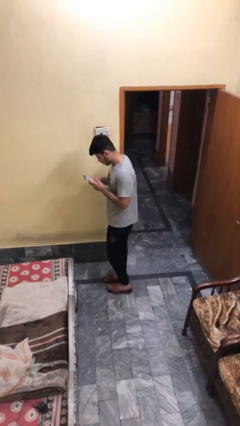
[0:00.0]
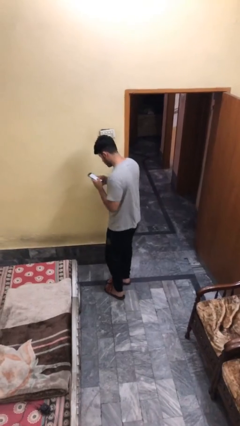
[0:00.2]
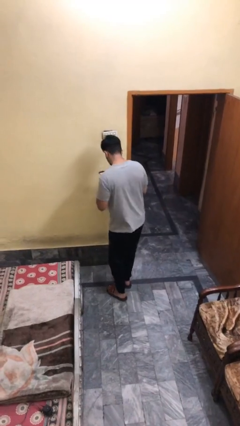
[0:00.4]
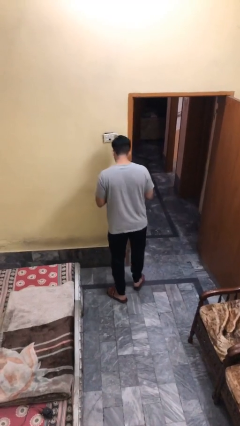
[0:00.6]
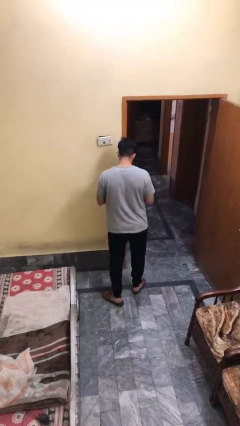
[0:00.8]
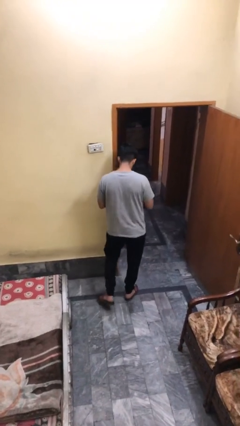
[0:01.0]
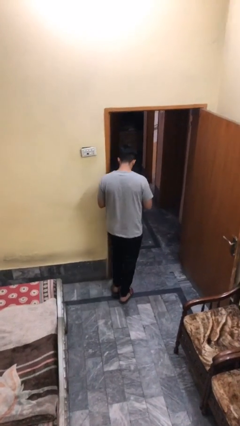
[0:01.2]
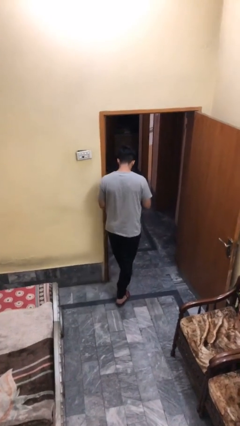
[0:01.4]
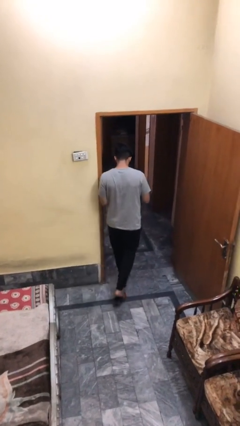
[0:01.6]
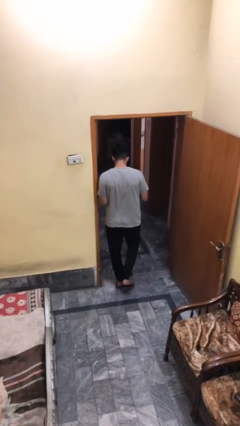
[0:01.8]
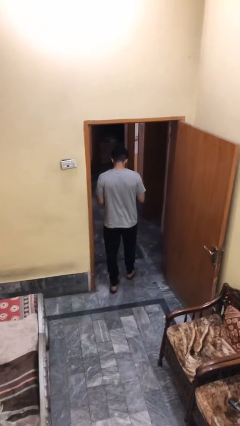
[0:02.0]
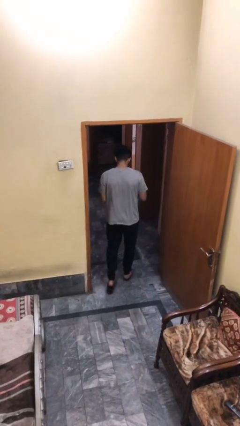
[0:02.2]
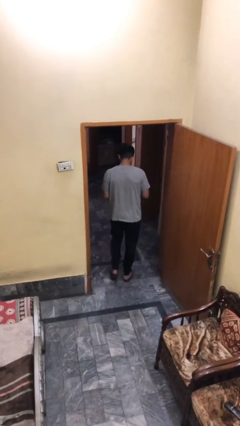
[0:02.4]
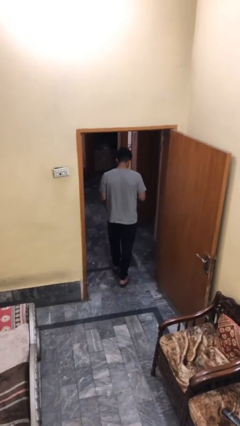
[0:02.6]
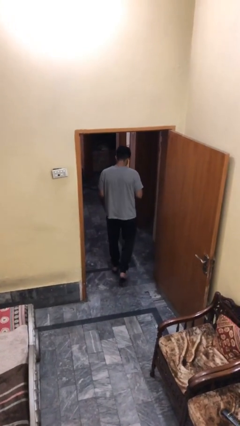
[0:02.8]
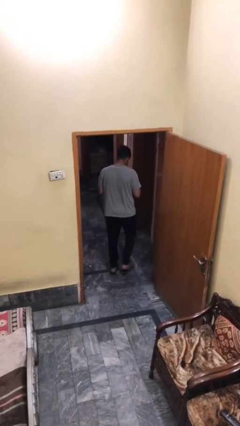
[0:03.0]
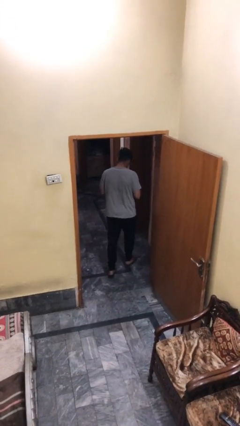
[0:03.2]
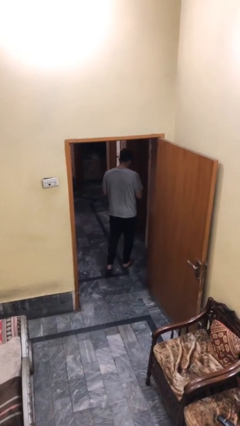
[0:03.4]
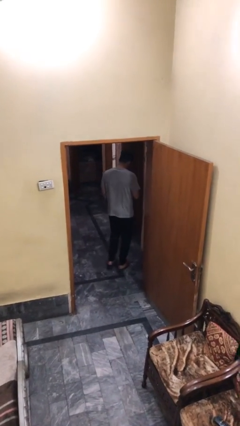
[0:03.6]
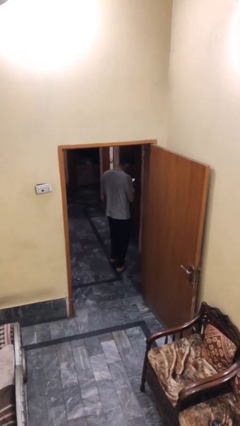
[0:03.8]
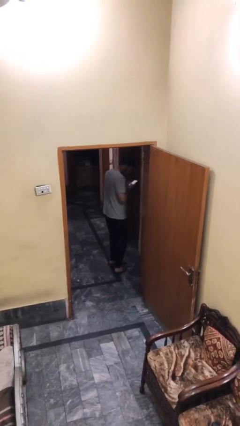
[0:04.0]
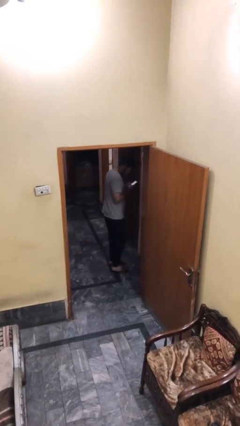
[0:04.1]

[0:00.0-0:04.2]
person exits scene through structure

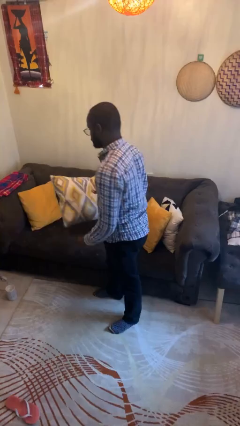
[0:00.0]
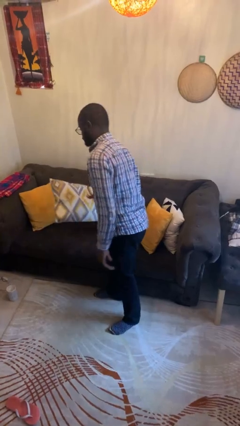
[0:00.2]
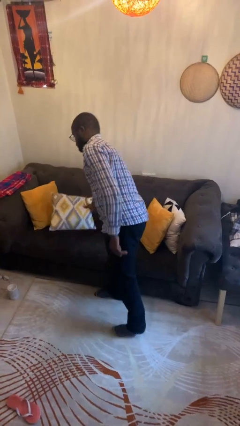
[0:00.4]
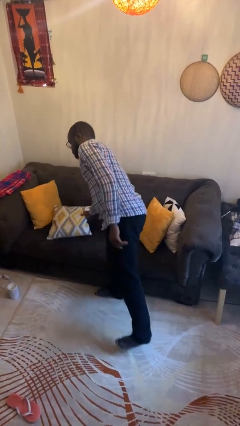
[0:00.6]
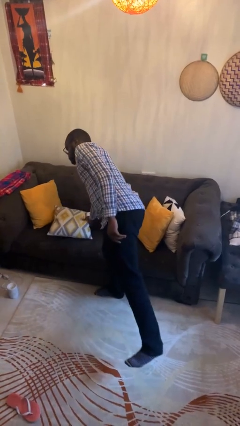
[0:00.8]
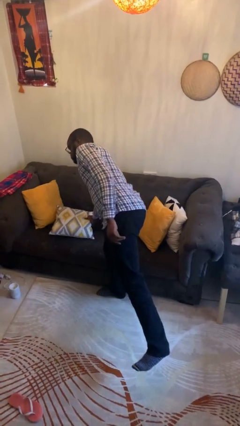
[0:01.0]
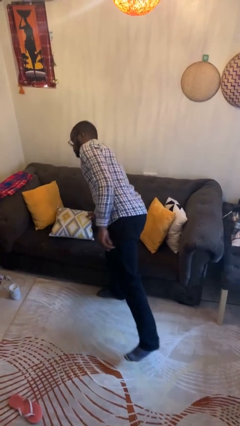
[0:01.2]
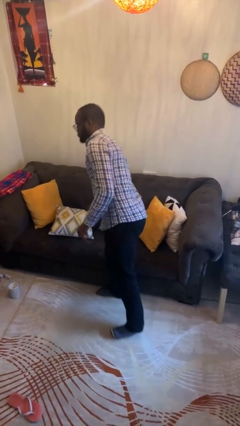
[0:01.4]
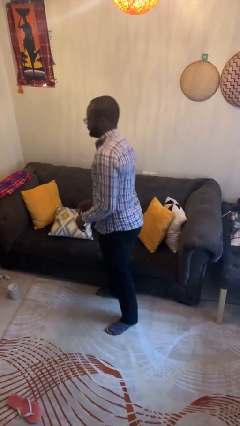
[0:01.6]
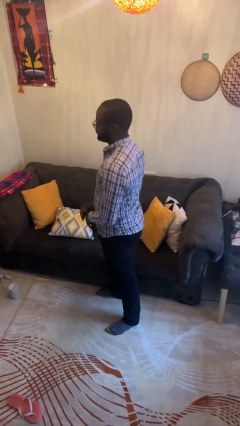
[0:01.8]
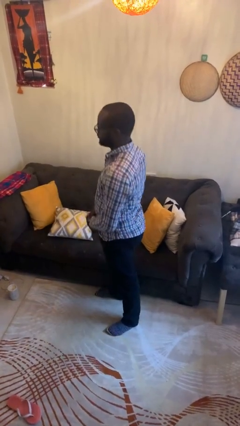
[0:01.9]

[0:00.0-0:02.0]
person puts down object on couch

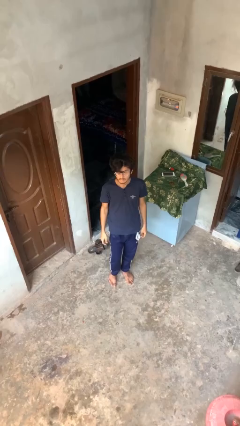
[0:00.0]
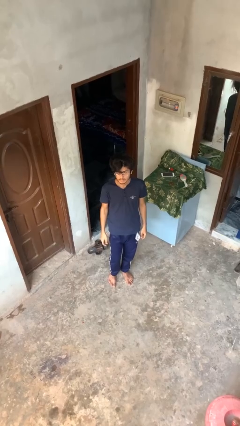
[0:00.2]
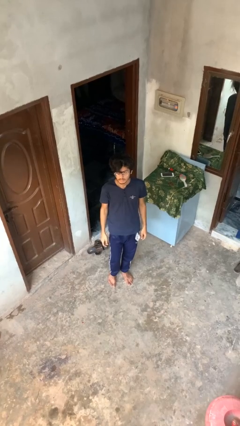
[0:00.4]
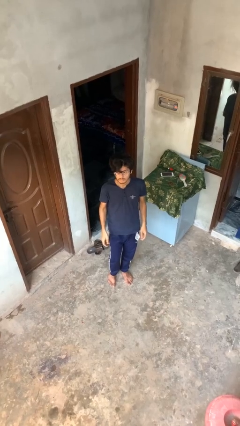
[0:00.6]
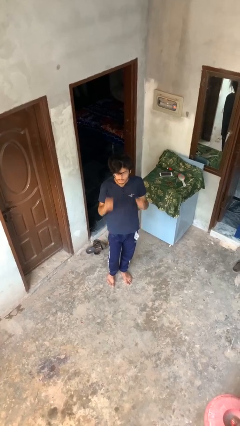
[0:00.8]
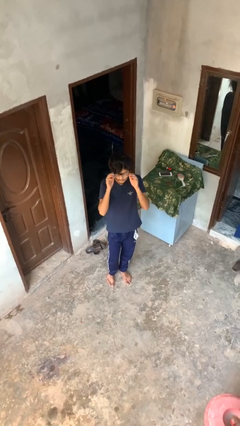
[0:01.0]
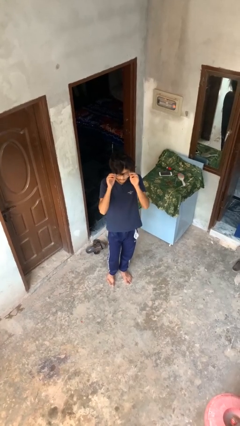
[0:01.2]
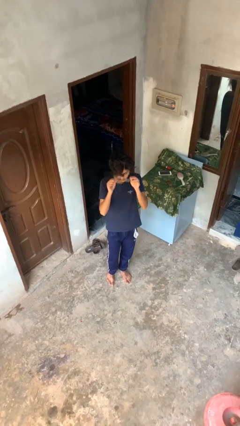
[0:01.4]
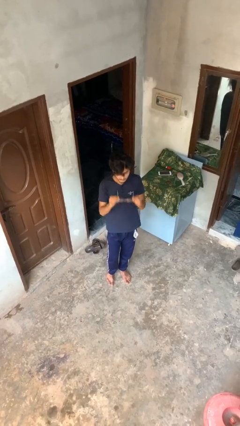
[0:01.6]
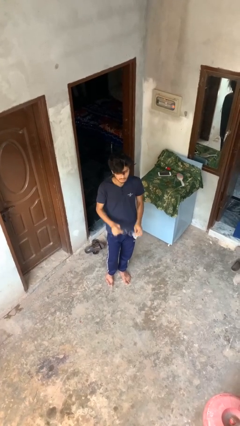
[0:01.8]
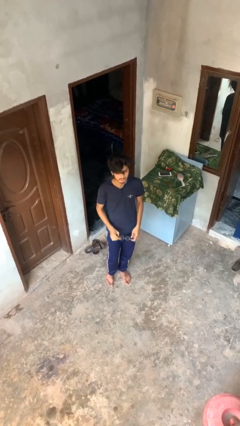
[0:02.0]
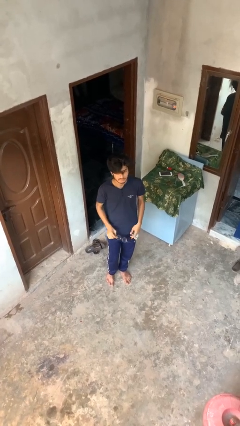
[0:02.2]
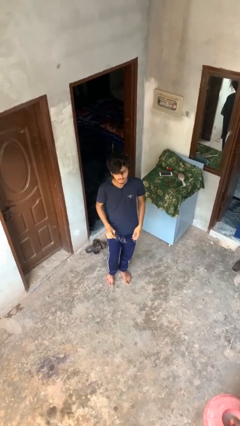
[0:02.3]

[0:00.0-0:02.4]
person takes off glasses

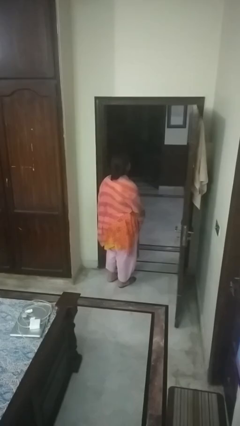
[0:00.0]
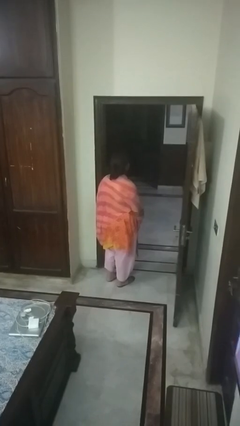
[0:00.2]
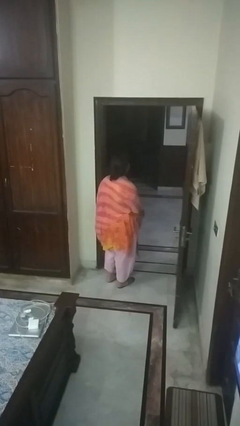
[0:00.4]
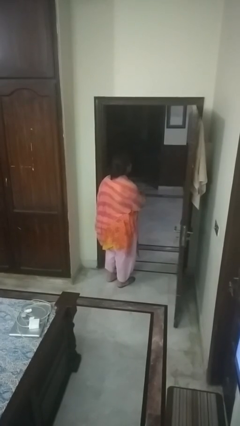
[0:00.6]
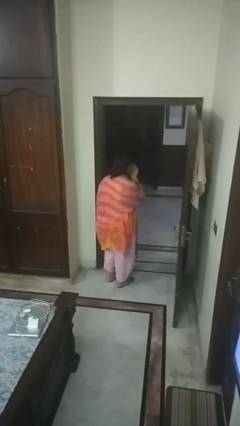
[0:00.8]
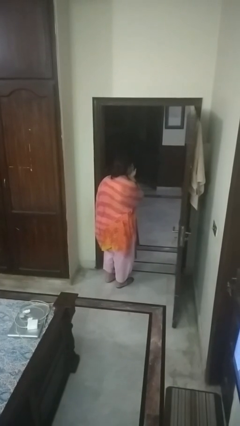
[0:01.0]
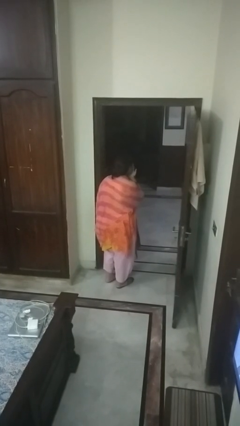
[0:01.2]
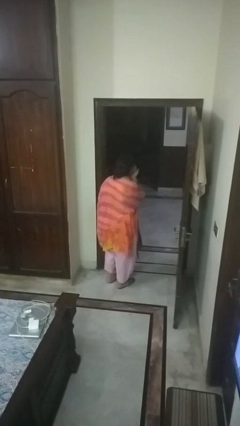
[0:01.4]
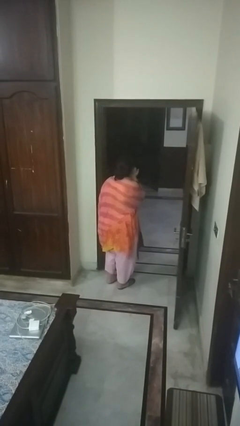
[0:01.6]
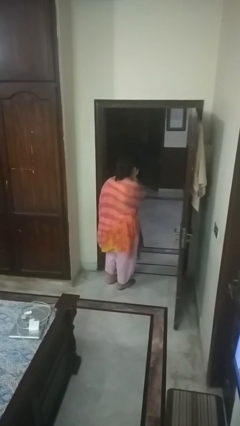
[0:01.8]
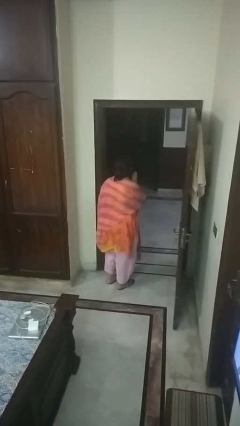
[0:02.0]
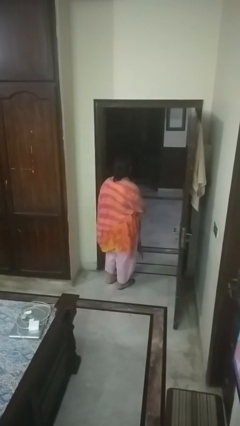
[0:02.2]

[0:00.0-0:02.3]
person gestures blow kiss

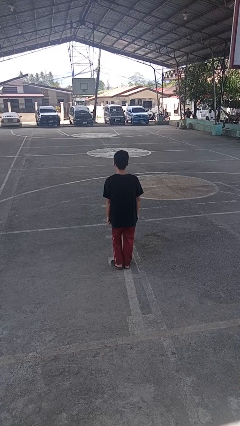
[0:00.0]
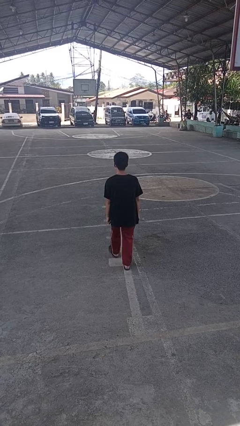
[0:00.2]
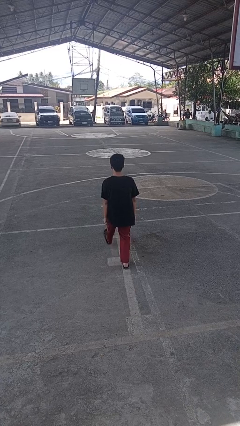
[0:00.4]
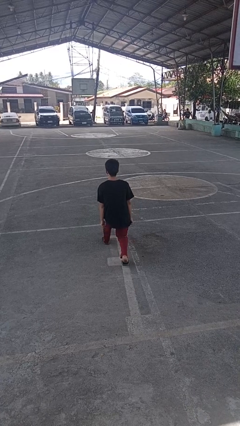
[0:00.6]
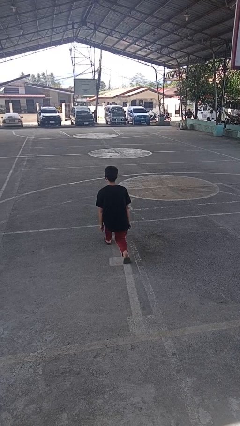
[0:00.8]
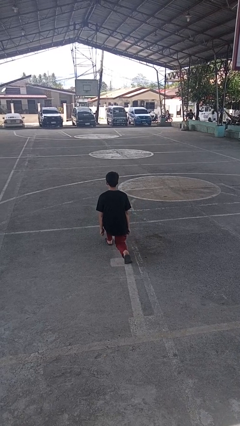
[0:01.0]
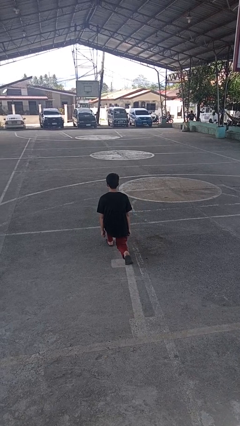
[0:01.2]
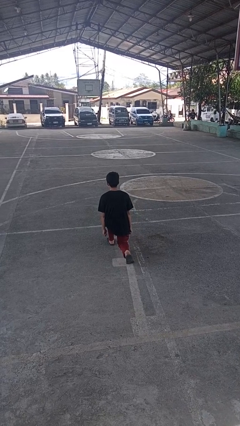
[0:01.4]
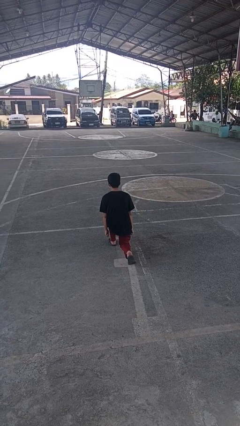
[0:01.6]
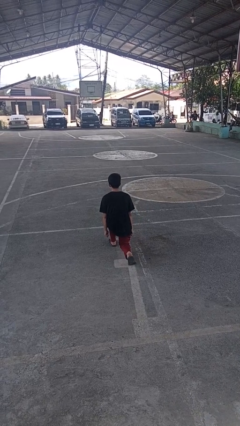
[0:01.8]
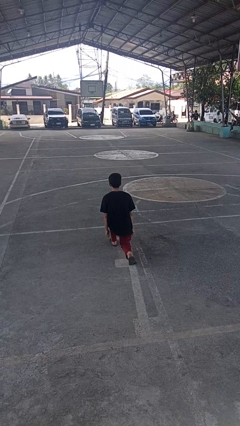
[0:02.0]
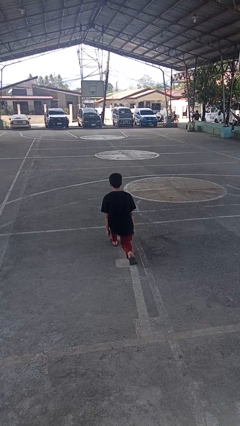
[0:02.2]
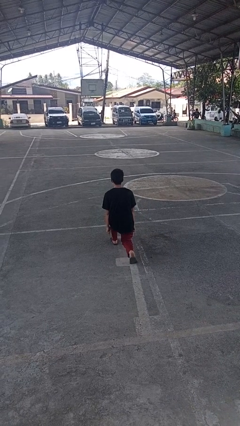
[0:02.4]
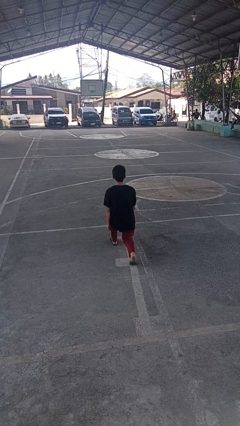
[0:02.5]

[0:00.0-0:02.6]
person exercises with lunges

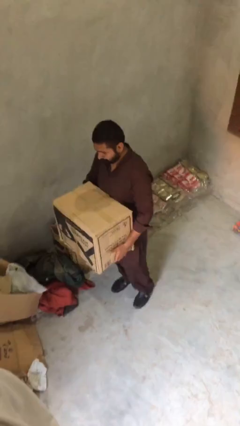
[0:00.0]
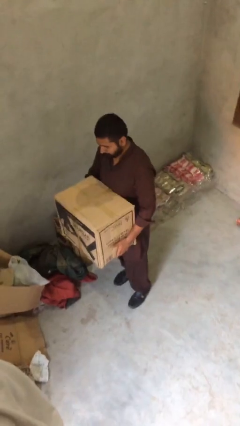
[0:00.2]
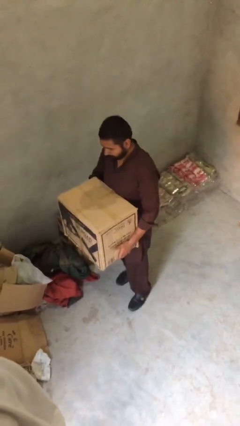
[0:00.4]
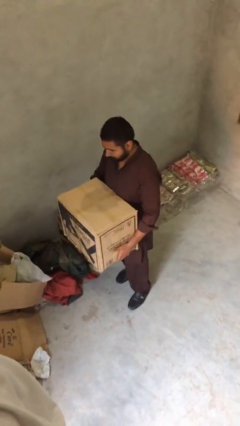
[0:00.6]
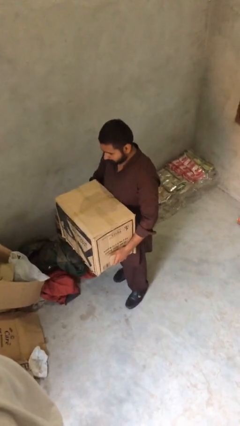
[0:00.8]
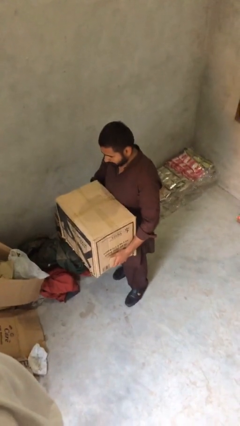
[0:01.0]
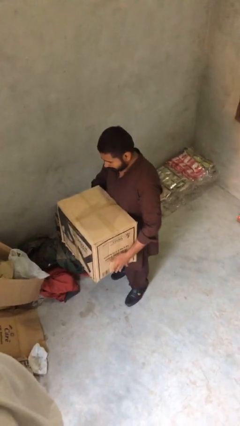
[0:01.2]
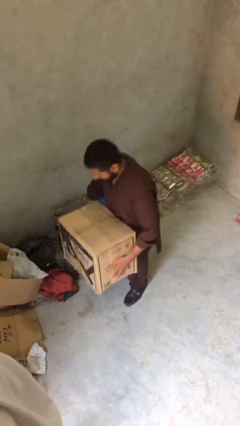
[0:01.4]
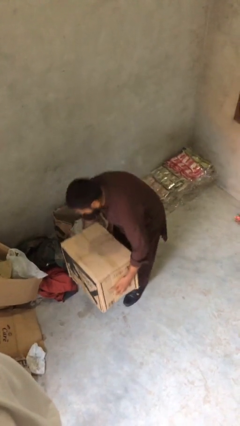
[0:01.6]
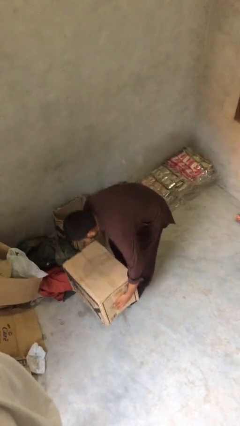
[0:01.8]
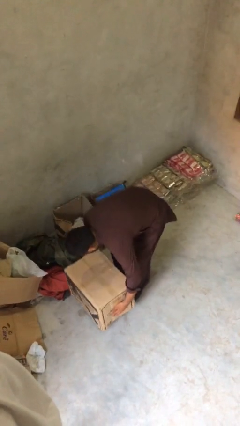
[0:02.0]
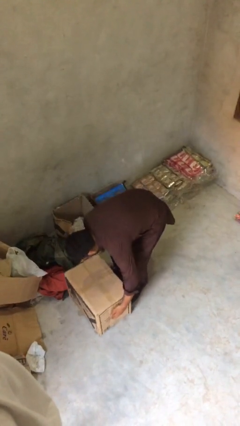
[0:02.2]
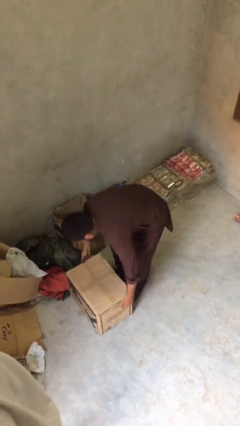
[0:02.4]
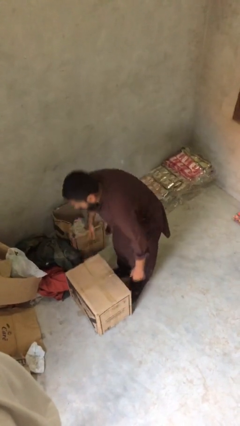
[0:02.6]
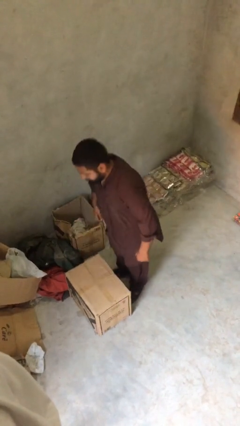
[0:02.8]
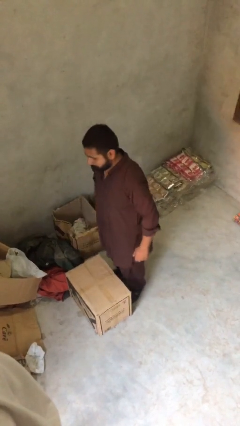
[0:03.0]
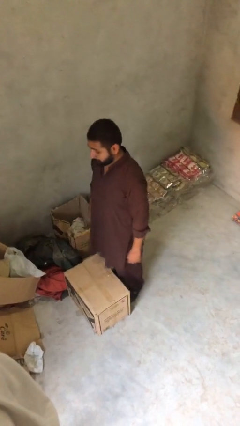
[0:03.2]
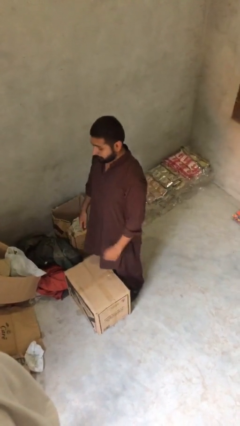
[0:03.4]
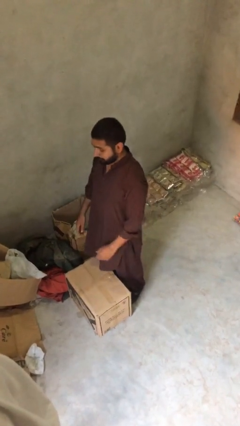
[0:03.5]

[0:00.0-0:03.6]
person puts down object on floor

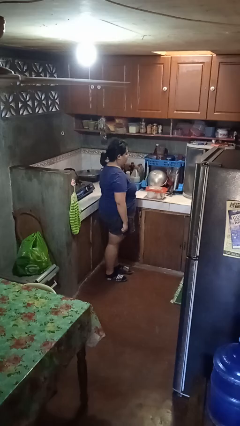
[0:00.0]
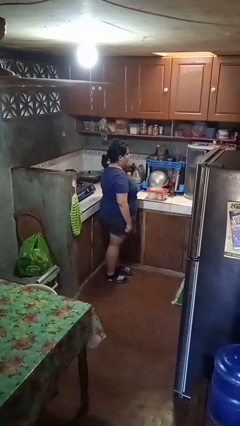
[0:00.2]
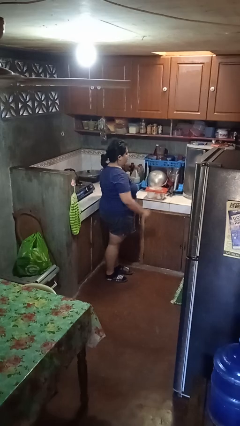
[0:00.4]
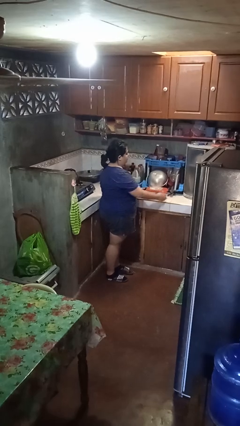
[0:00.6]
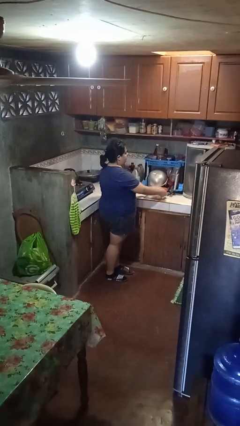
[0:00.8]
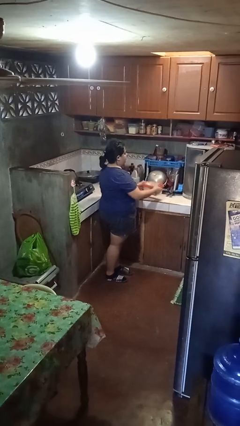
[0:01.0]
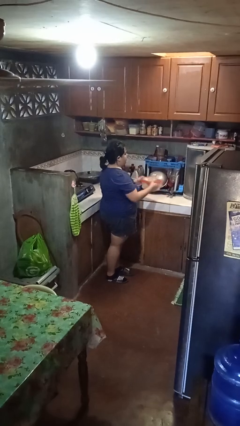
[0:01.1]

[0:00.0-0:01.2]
person picks up object from countertop
